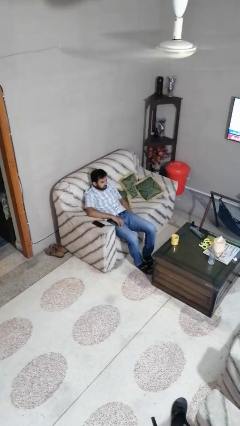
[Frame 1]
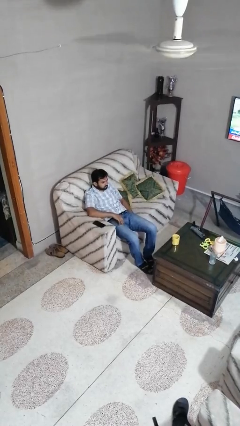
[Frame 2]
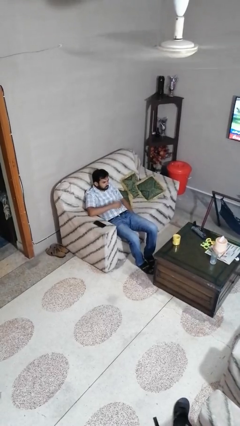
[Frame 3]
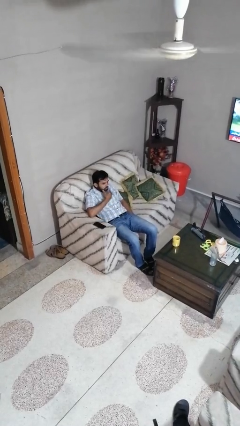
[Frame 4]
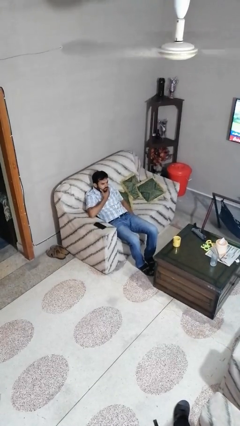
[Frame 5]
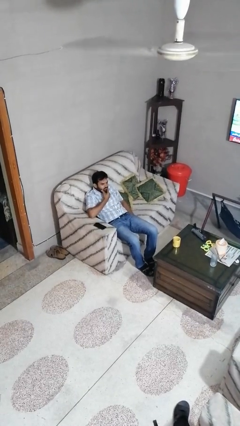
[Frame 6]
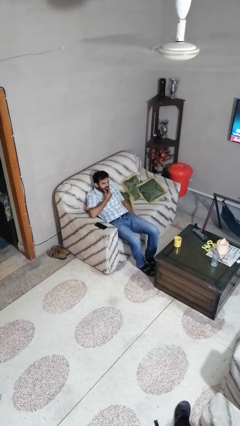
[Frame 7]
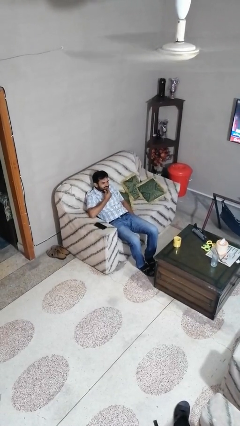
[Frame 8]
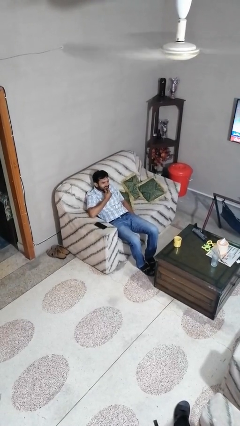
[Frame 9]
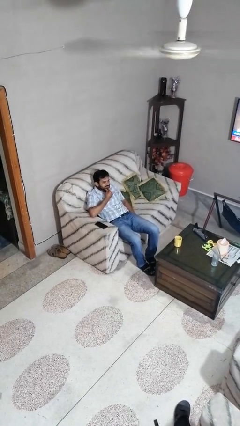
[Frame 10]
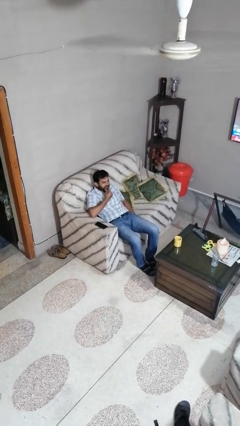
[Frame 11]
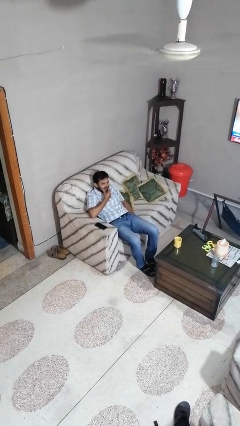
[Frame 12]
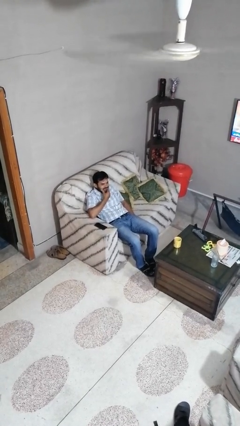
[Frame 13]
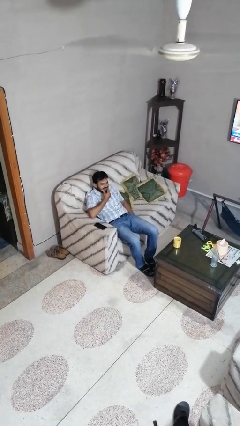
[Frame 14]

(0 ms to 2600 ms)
person strokes chin

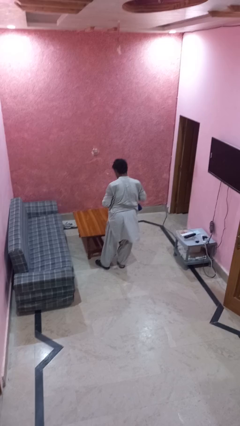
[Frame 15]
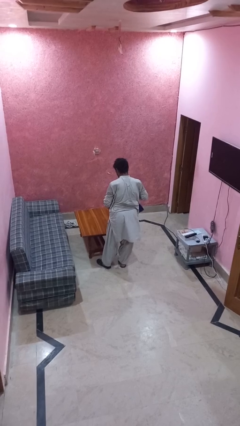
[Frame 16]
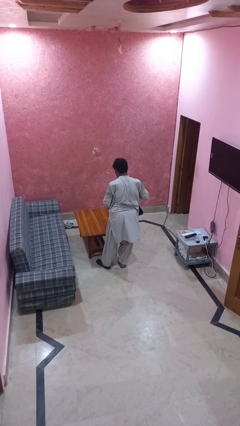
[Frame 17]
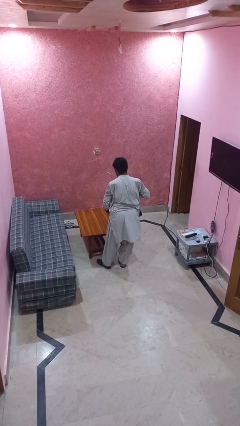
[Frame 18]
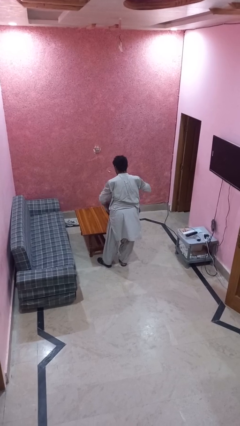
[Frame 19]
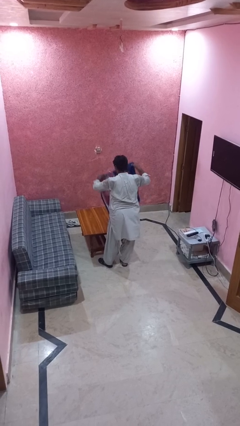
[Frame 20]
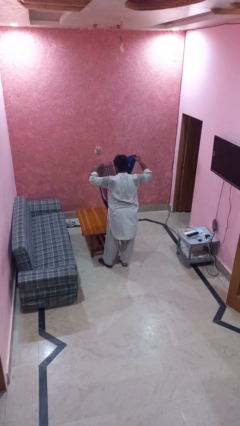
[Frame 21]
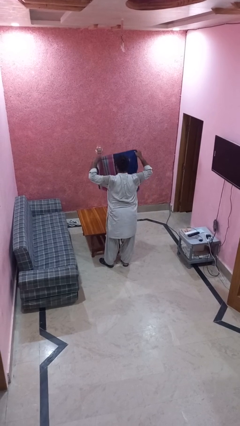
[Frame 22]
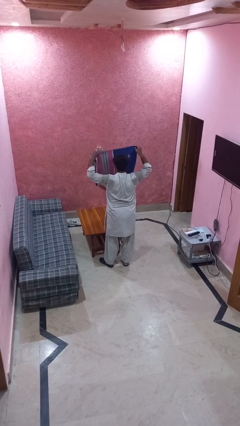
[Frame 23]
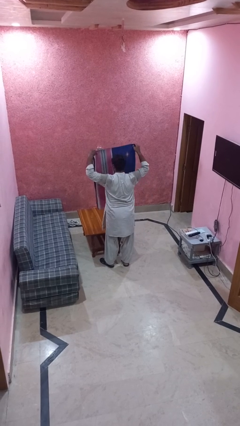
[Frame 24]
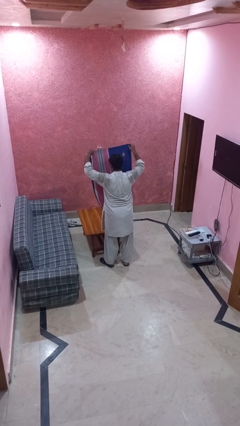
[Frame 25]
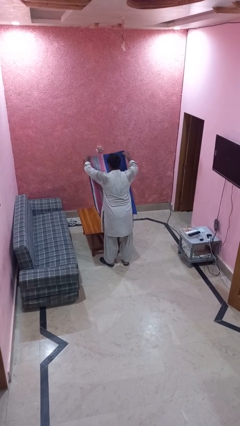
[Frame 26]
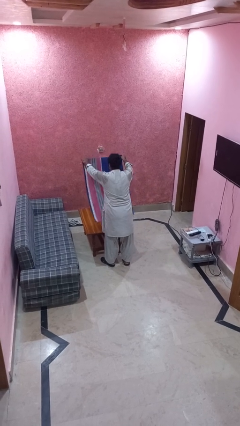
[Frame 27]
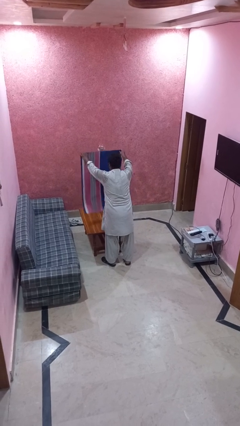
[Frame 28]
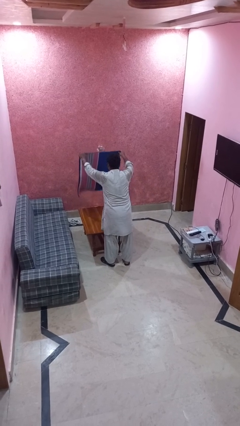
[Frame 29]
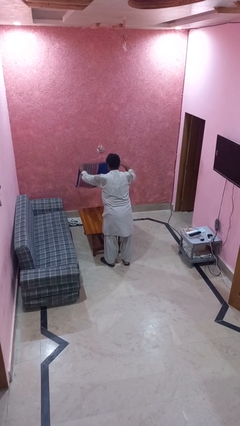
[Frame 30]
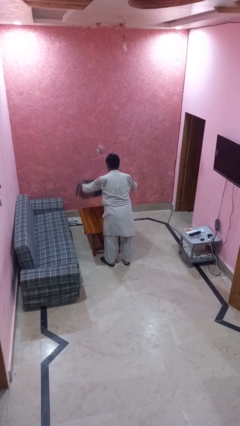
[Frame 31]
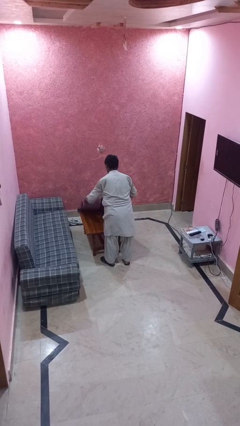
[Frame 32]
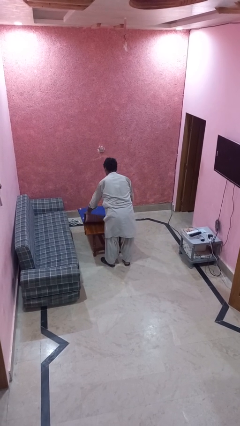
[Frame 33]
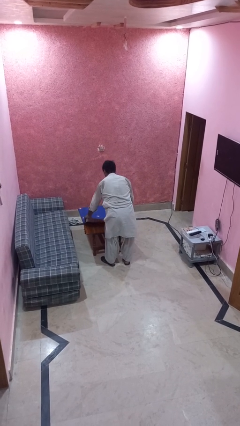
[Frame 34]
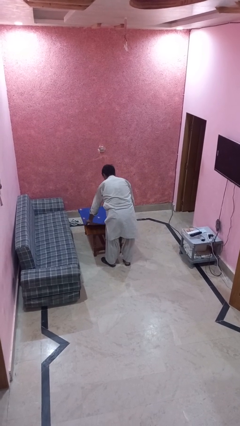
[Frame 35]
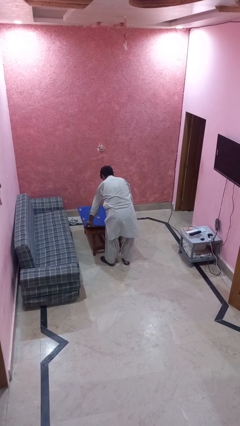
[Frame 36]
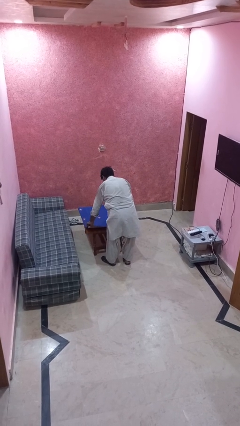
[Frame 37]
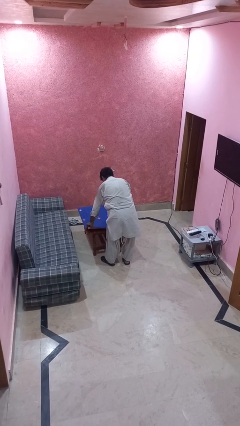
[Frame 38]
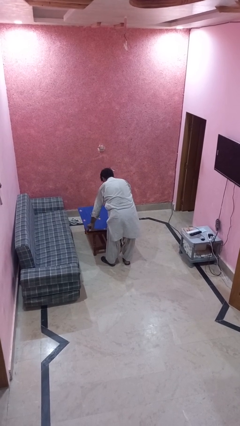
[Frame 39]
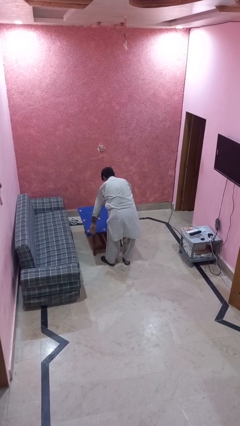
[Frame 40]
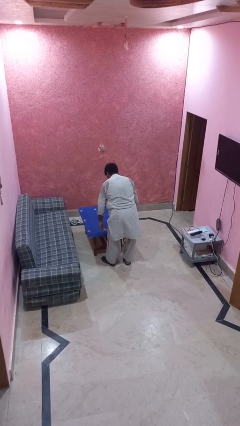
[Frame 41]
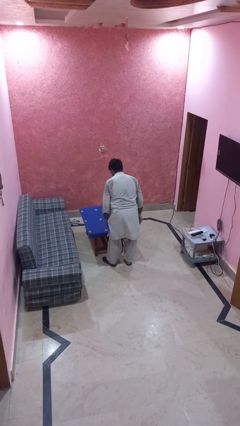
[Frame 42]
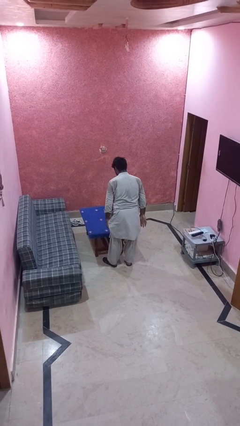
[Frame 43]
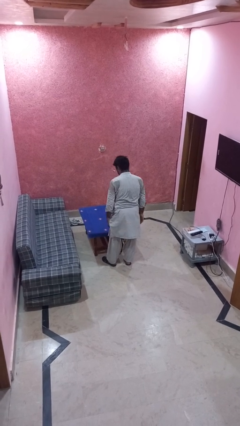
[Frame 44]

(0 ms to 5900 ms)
person spreads tablecloth

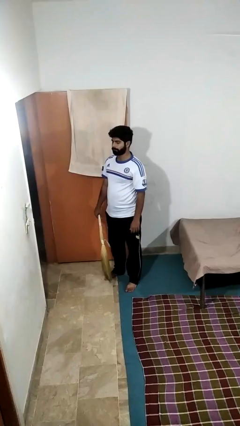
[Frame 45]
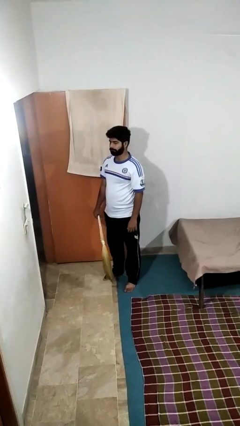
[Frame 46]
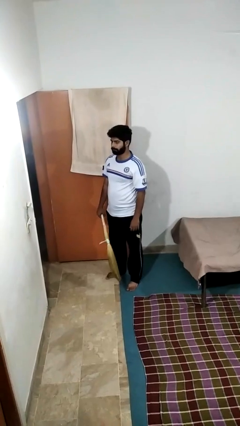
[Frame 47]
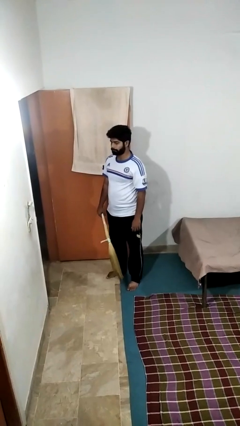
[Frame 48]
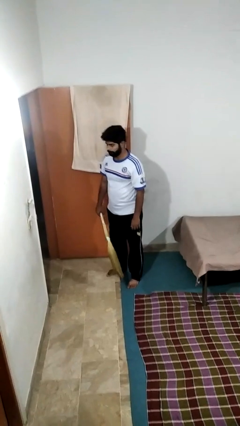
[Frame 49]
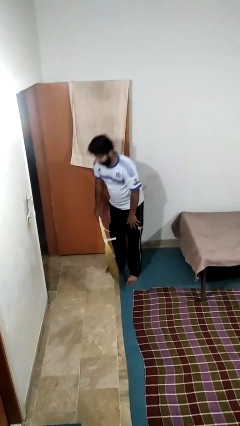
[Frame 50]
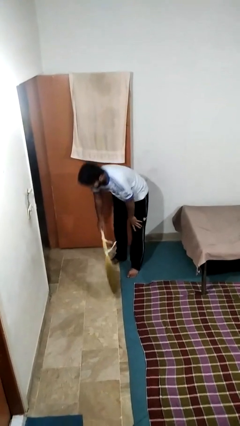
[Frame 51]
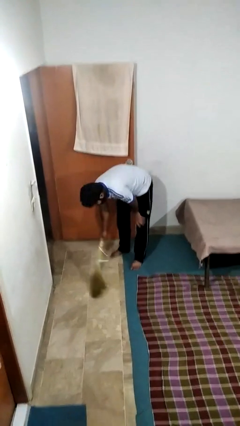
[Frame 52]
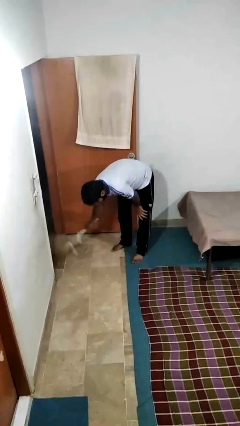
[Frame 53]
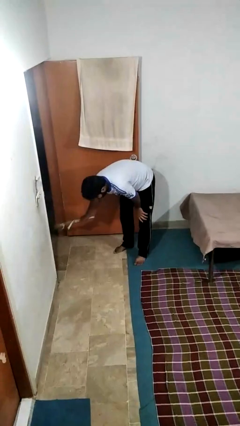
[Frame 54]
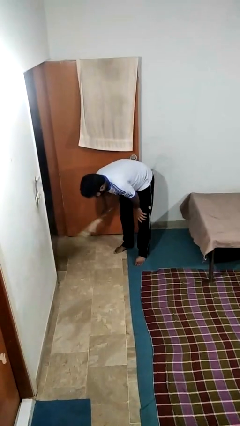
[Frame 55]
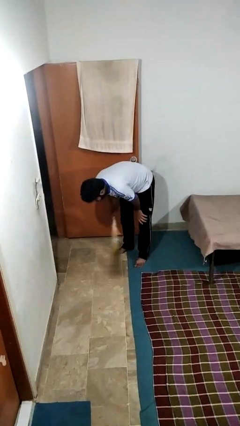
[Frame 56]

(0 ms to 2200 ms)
person sweeps floor

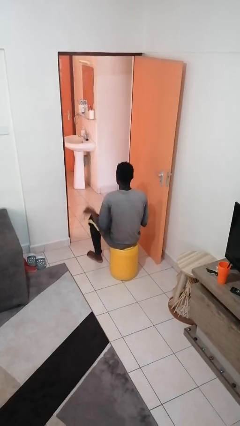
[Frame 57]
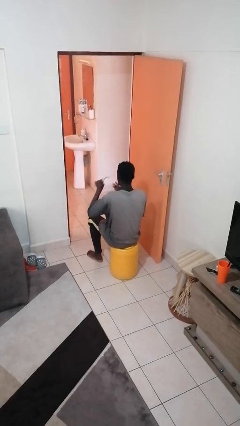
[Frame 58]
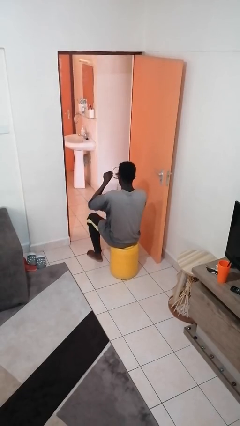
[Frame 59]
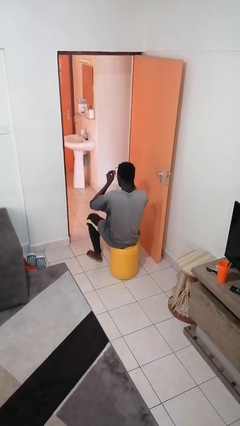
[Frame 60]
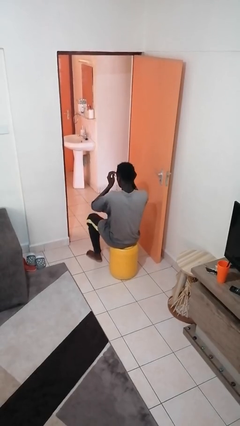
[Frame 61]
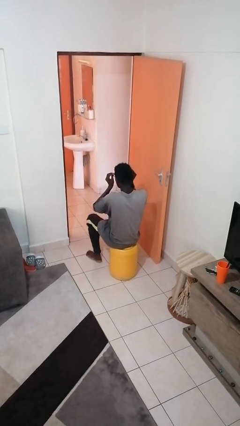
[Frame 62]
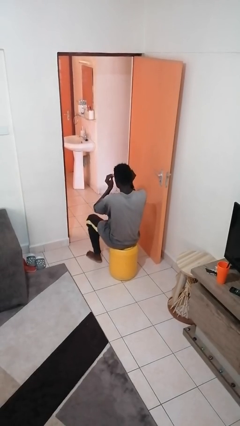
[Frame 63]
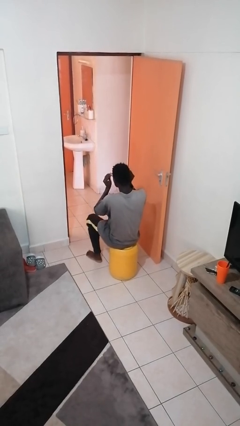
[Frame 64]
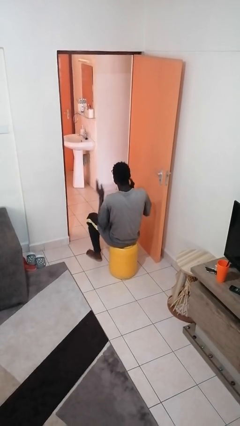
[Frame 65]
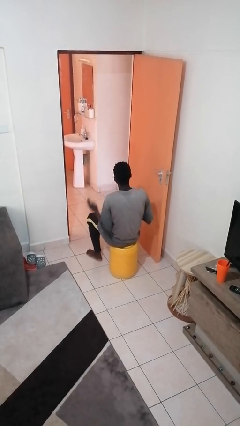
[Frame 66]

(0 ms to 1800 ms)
person puts on glasses

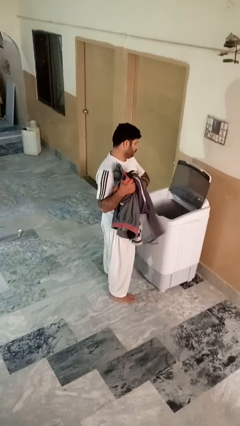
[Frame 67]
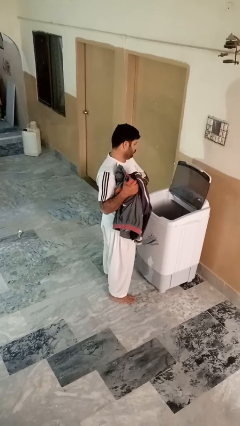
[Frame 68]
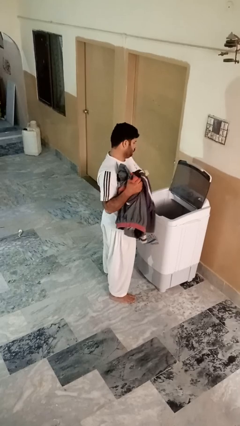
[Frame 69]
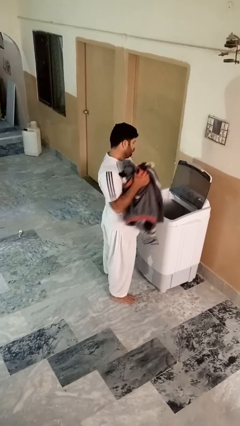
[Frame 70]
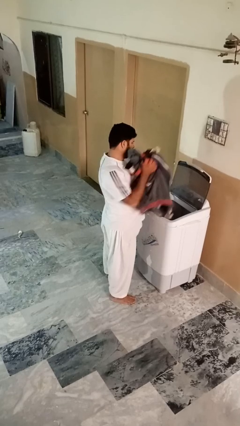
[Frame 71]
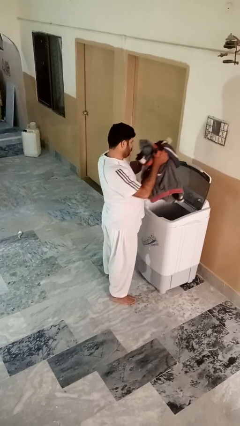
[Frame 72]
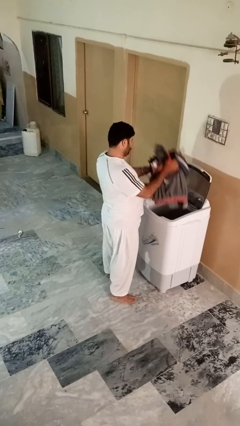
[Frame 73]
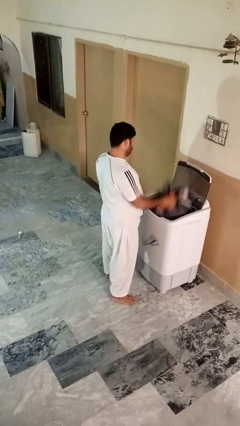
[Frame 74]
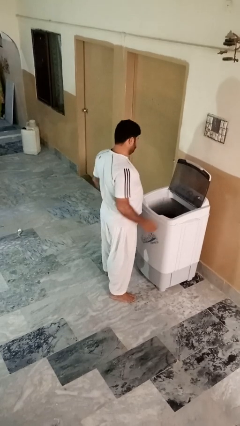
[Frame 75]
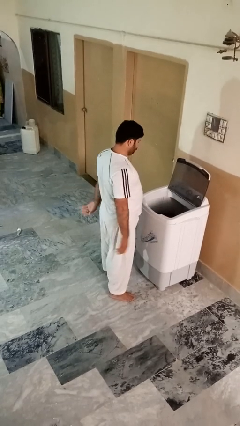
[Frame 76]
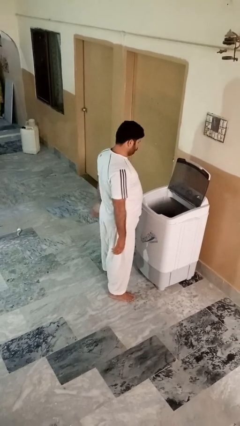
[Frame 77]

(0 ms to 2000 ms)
person loads clotheswasher

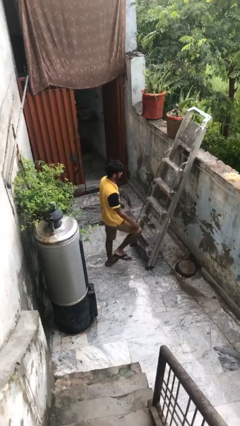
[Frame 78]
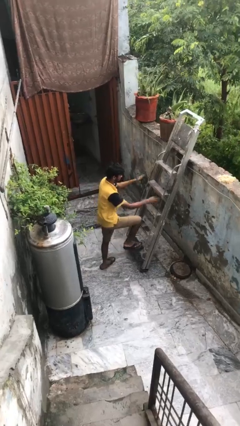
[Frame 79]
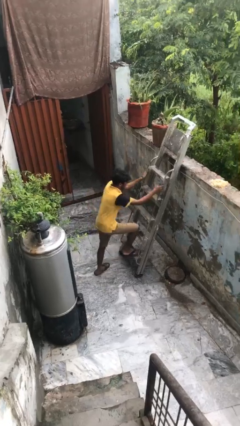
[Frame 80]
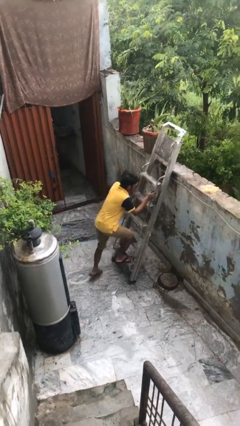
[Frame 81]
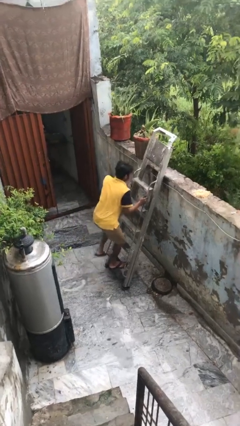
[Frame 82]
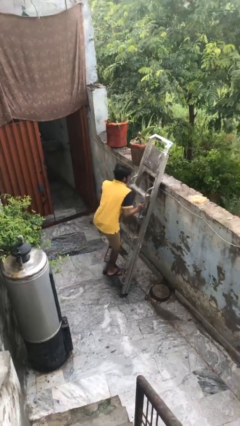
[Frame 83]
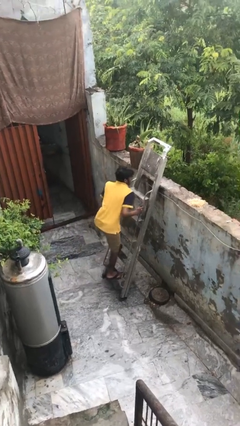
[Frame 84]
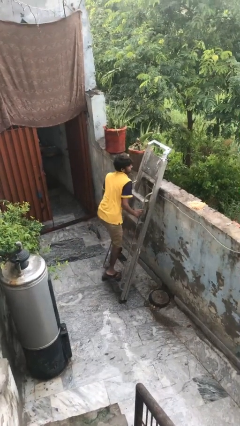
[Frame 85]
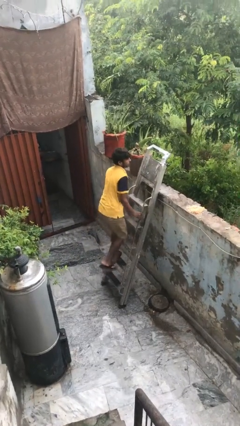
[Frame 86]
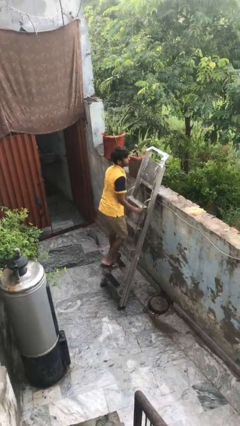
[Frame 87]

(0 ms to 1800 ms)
person climbs up ladder

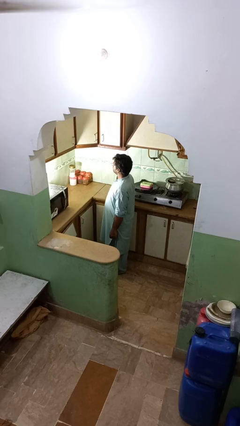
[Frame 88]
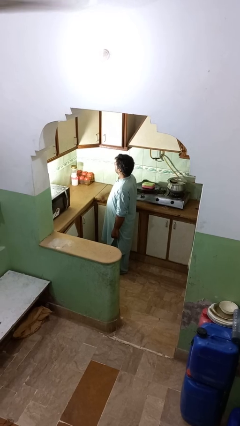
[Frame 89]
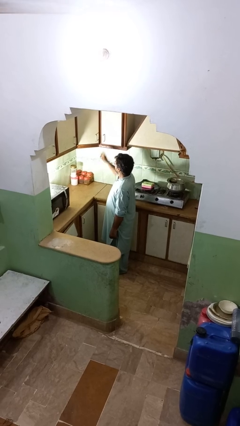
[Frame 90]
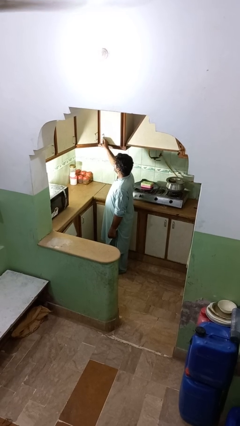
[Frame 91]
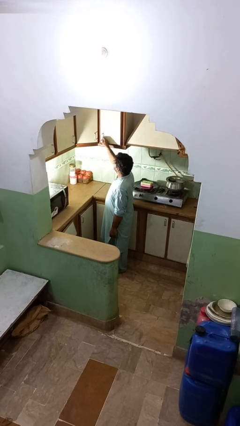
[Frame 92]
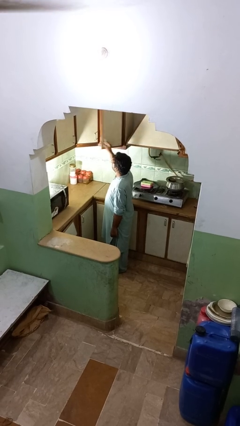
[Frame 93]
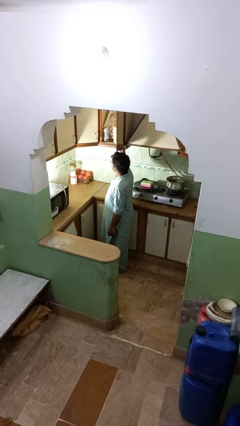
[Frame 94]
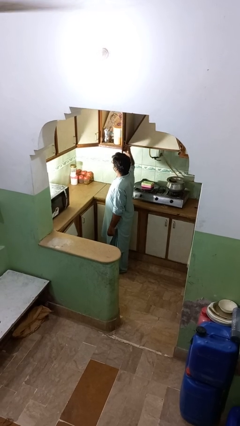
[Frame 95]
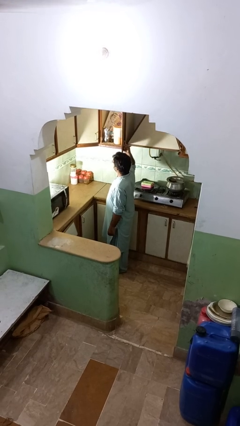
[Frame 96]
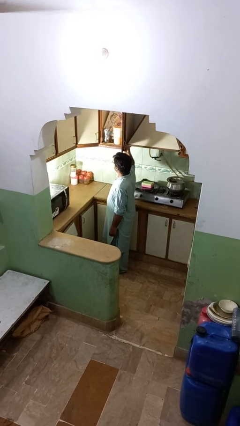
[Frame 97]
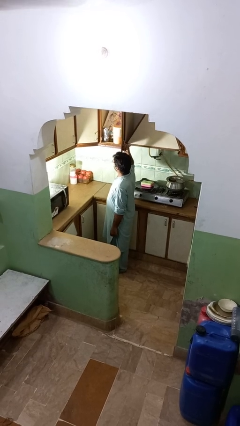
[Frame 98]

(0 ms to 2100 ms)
person opens kitchen drawer
